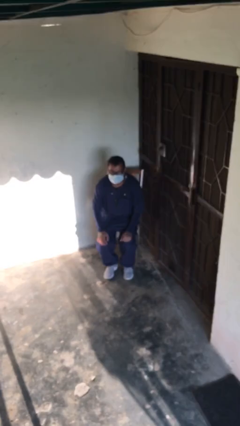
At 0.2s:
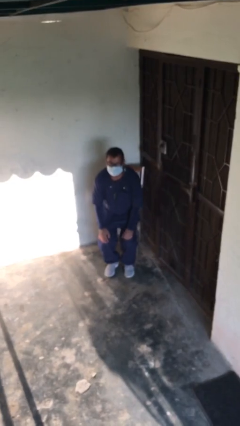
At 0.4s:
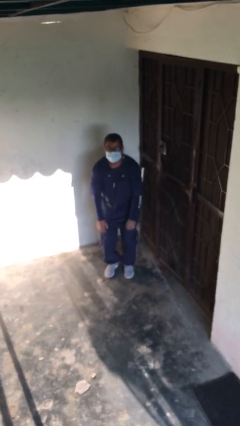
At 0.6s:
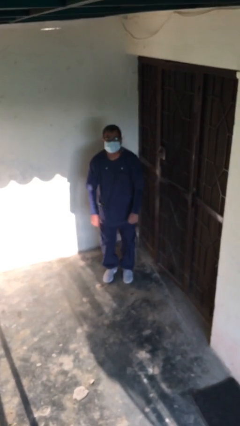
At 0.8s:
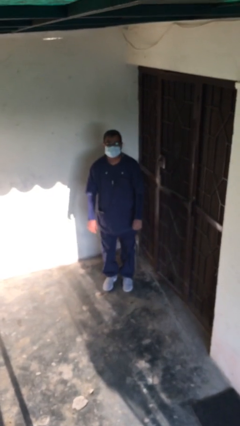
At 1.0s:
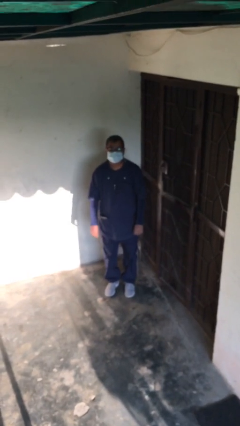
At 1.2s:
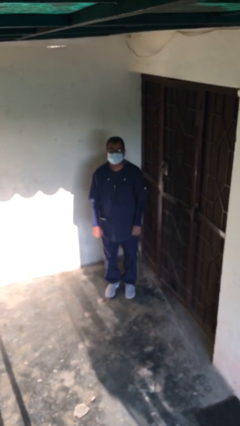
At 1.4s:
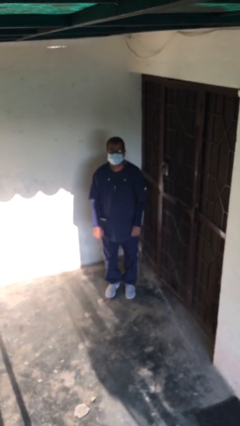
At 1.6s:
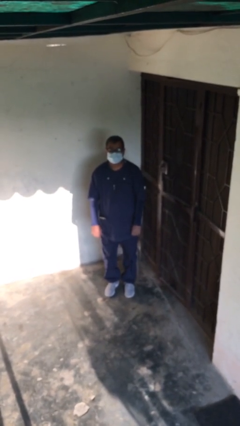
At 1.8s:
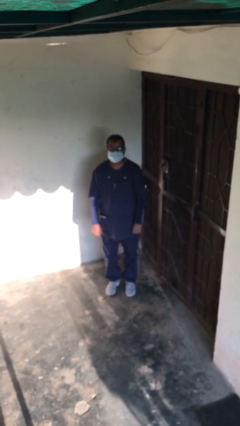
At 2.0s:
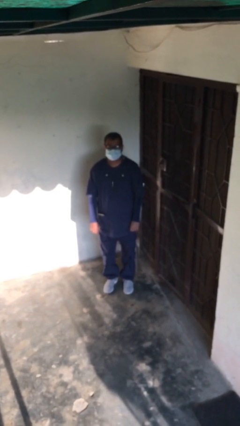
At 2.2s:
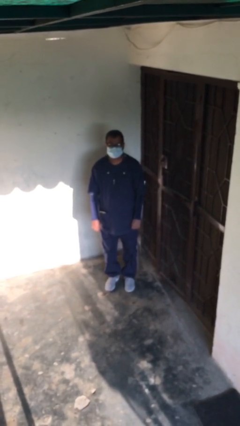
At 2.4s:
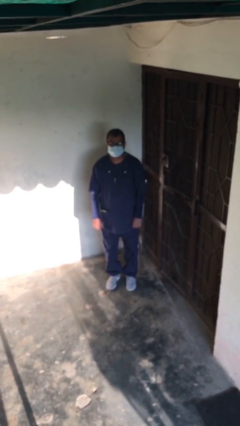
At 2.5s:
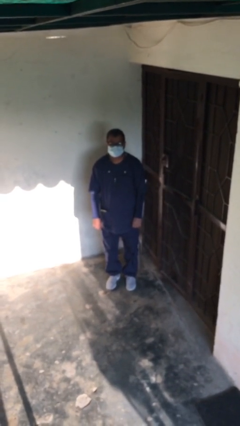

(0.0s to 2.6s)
person stands up

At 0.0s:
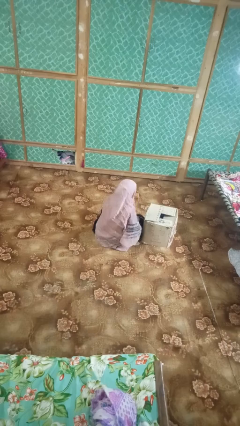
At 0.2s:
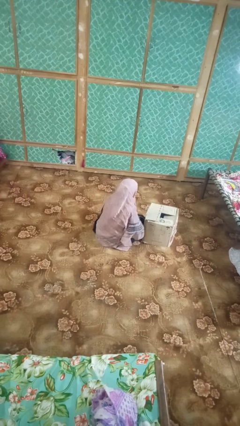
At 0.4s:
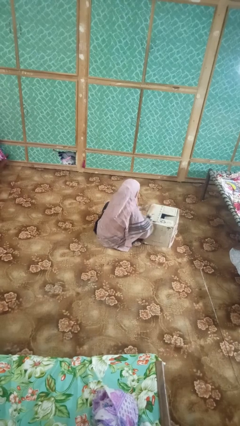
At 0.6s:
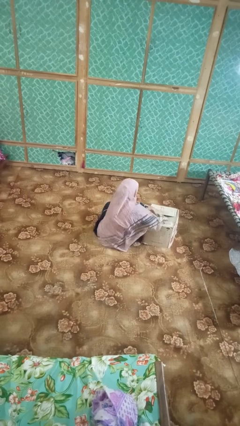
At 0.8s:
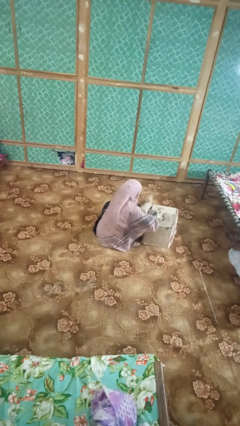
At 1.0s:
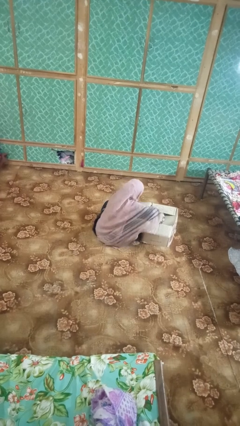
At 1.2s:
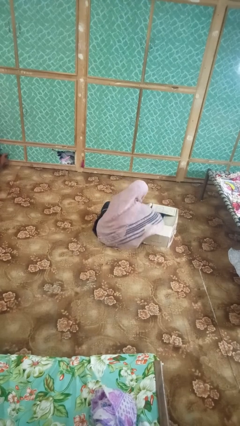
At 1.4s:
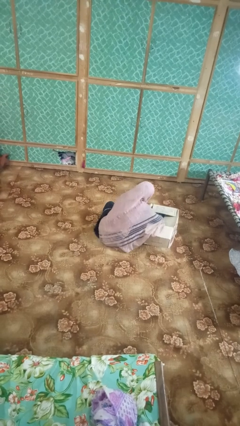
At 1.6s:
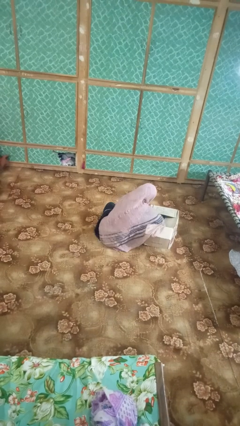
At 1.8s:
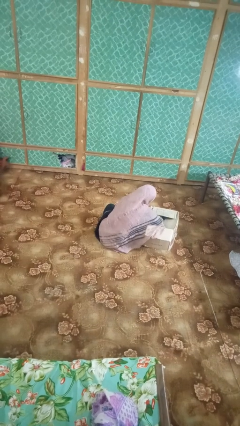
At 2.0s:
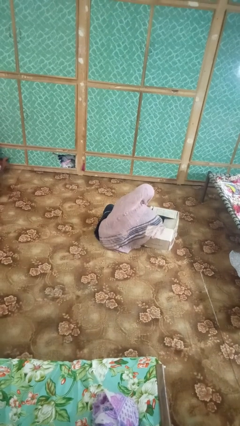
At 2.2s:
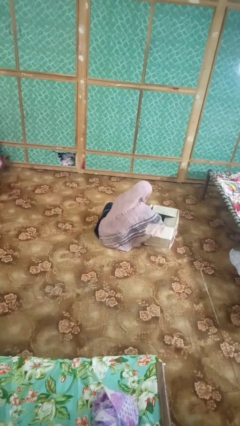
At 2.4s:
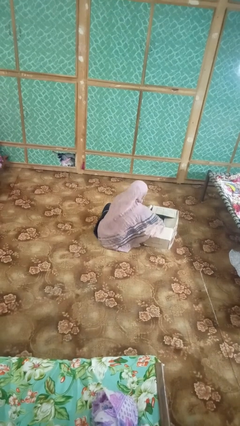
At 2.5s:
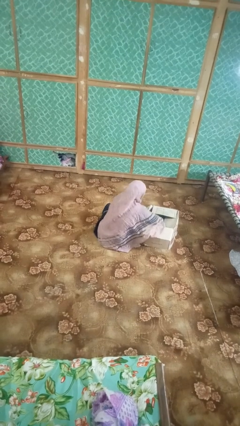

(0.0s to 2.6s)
person searches in box

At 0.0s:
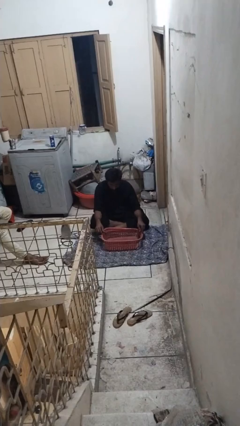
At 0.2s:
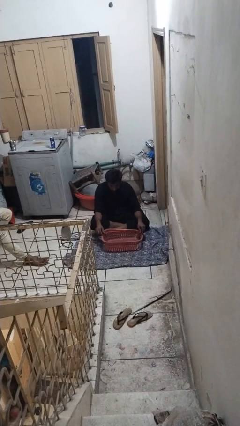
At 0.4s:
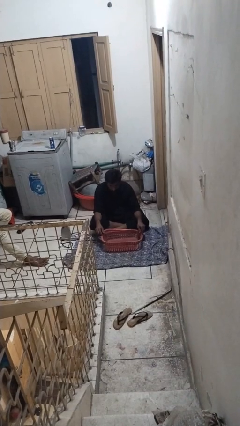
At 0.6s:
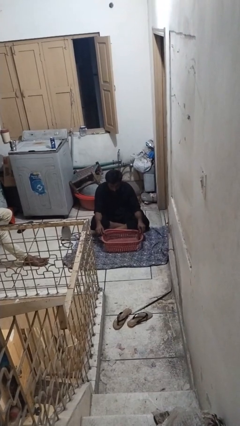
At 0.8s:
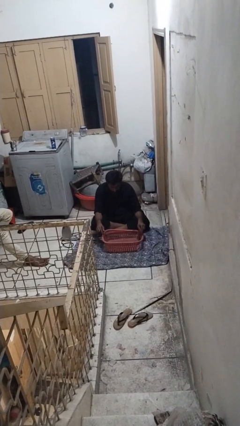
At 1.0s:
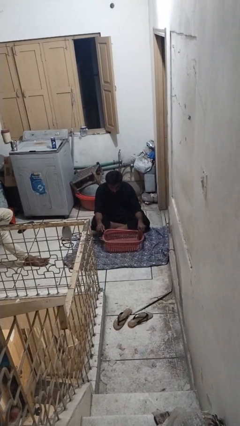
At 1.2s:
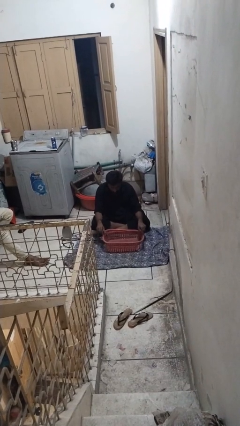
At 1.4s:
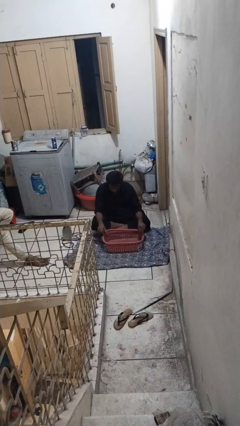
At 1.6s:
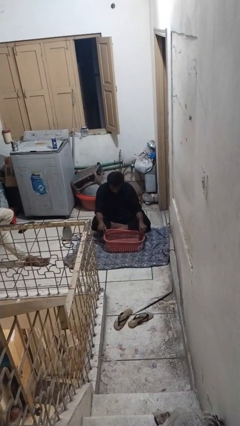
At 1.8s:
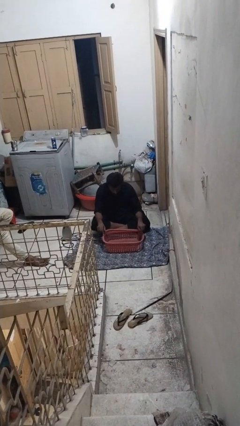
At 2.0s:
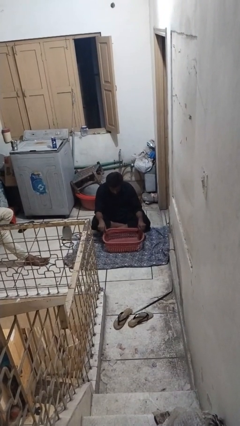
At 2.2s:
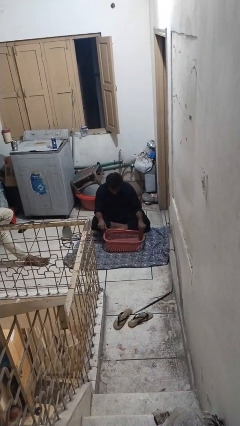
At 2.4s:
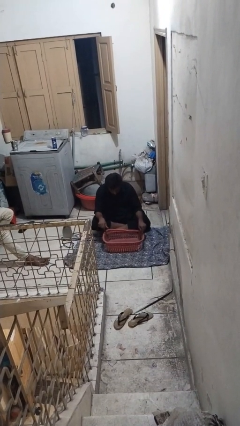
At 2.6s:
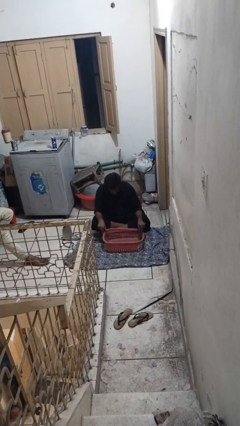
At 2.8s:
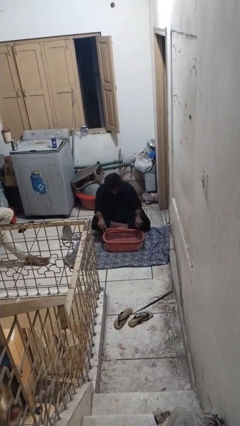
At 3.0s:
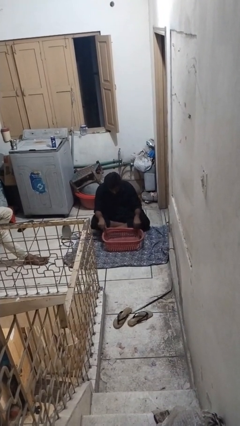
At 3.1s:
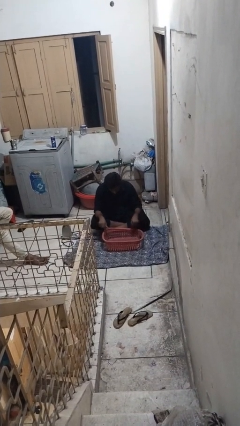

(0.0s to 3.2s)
person taps object with finger

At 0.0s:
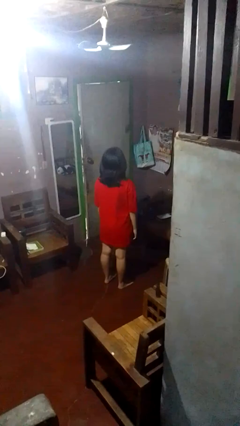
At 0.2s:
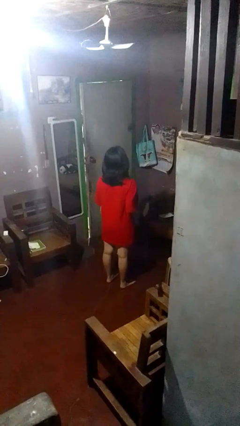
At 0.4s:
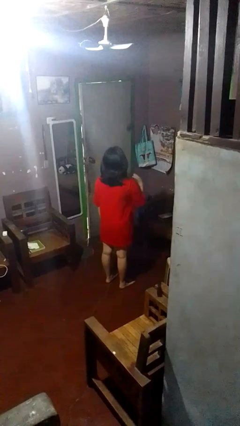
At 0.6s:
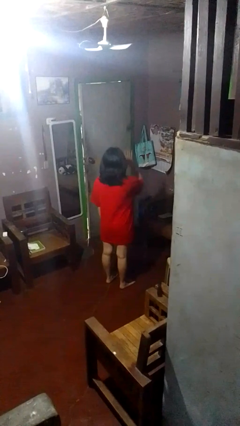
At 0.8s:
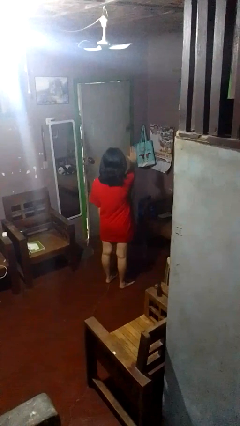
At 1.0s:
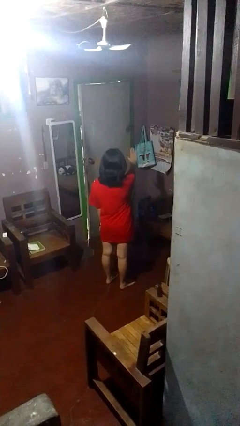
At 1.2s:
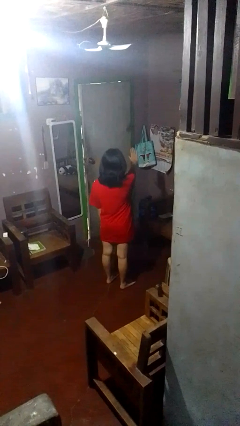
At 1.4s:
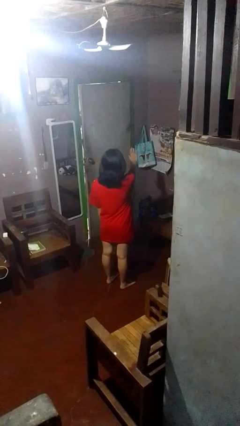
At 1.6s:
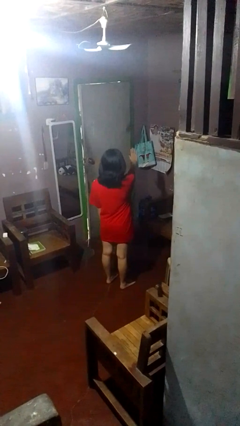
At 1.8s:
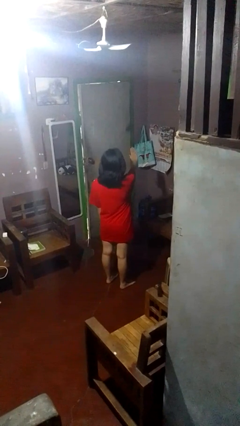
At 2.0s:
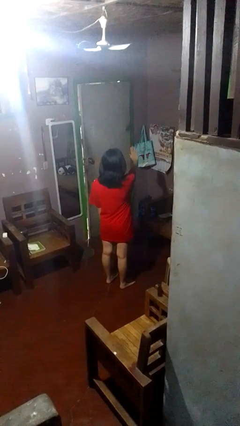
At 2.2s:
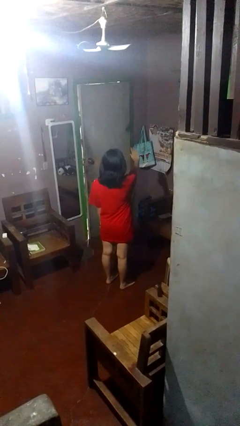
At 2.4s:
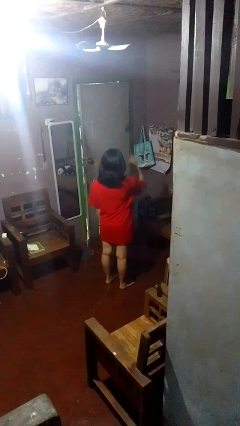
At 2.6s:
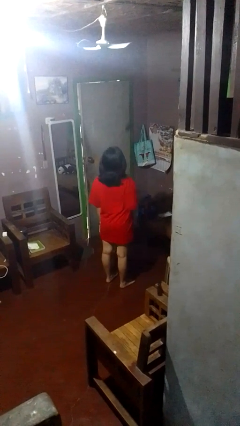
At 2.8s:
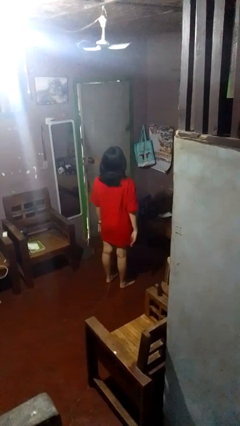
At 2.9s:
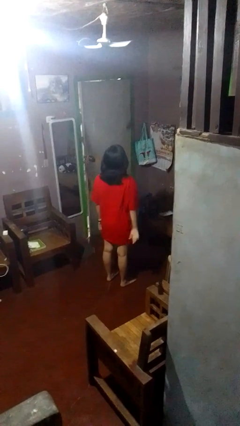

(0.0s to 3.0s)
person gestures stop

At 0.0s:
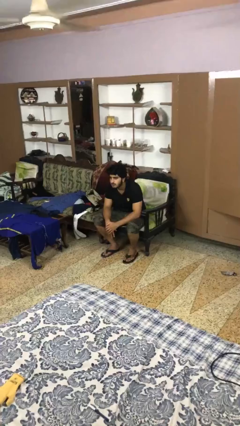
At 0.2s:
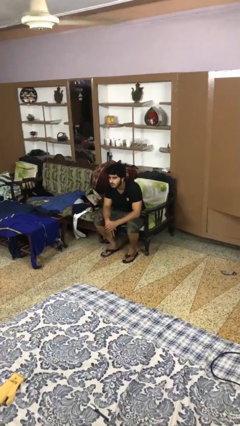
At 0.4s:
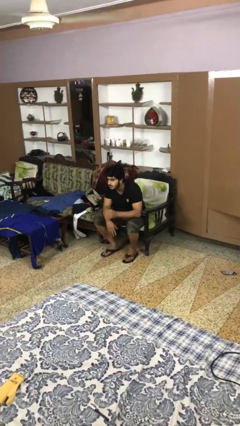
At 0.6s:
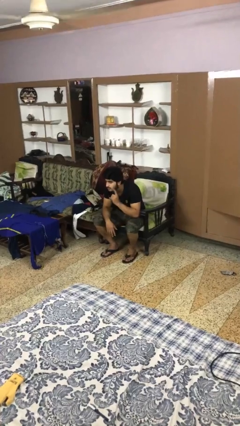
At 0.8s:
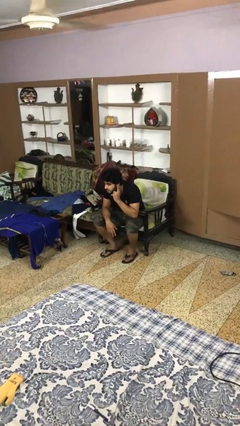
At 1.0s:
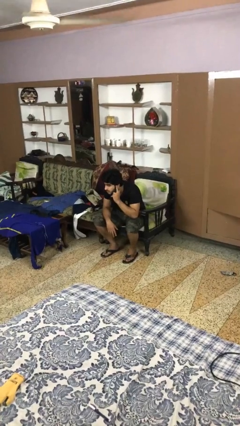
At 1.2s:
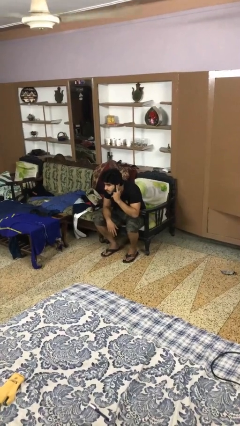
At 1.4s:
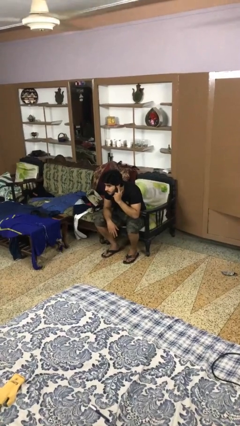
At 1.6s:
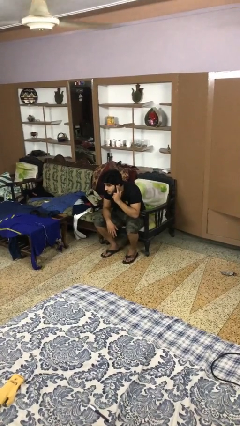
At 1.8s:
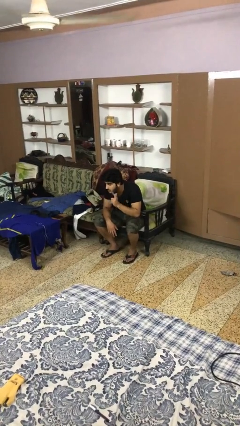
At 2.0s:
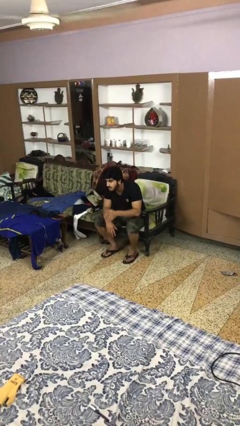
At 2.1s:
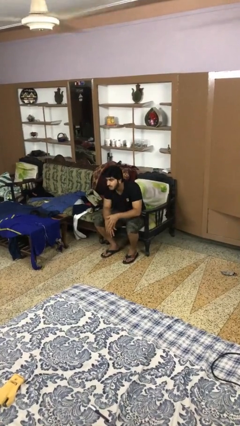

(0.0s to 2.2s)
person gestures listen closely

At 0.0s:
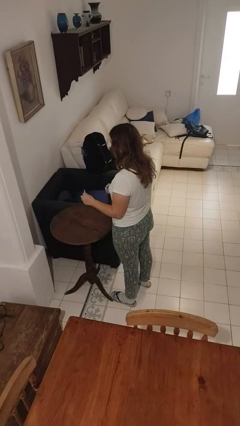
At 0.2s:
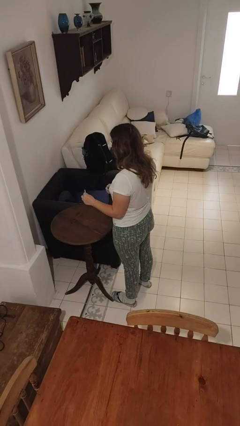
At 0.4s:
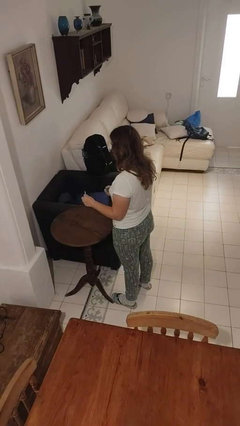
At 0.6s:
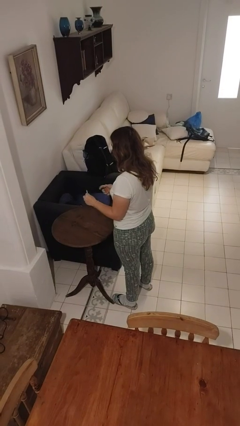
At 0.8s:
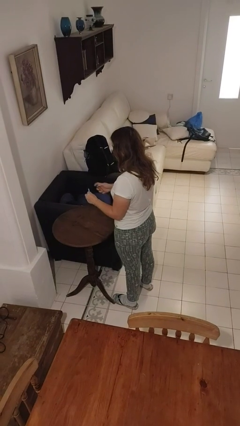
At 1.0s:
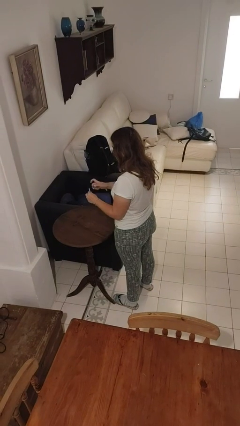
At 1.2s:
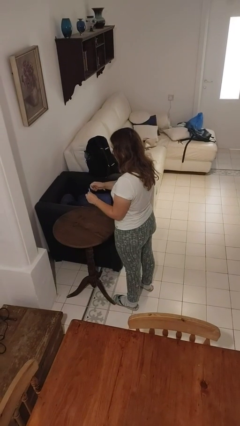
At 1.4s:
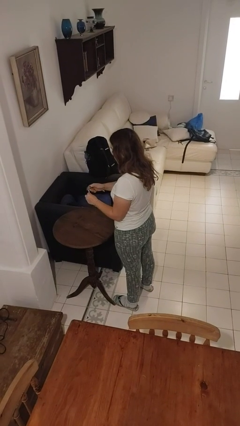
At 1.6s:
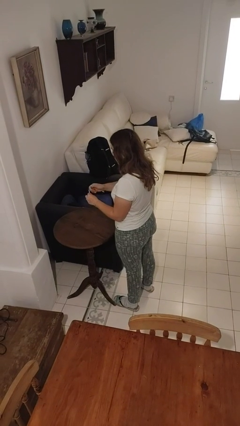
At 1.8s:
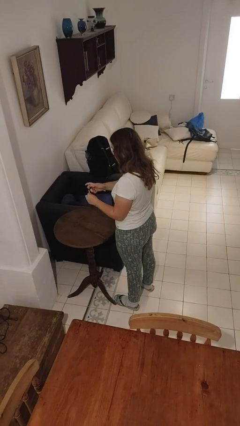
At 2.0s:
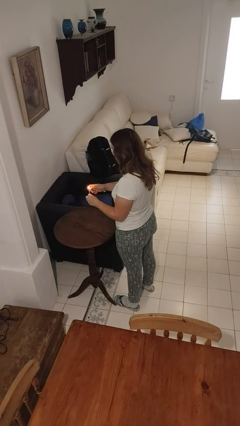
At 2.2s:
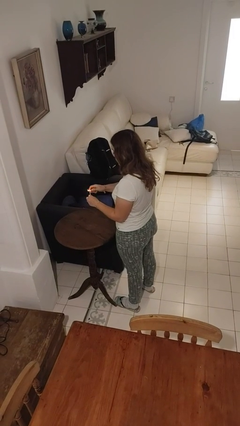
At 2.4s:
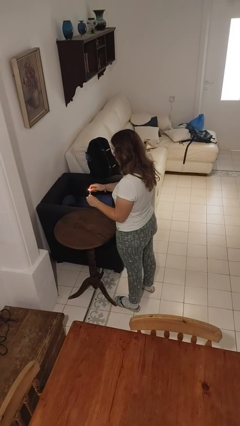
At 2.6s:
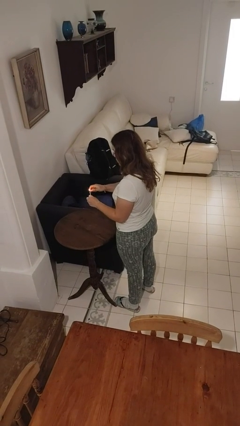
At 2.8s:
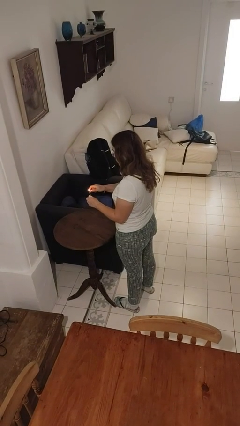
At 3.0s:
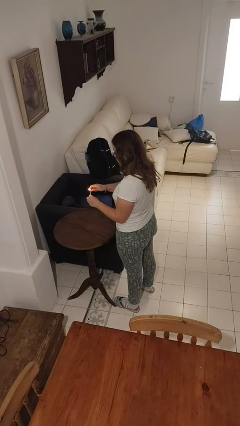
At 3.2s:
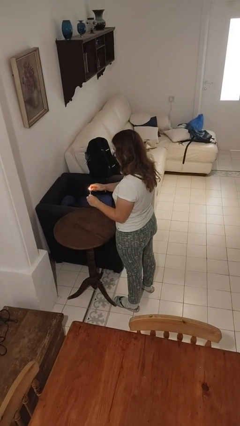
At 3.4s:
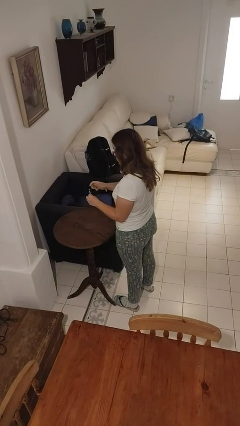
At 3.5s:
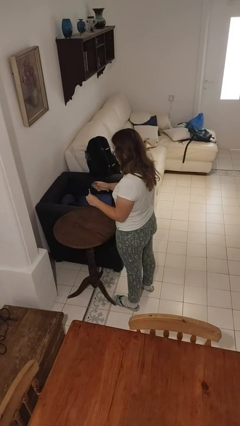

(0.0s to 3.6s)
person lights candle

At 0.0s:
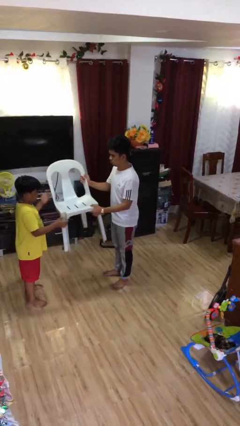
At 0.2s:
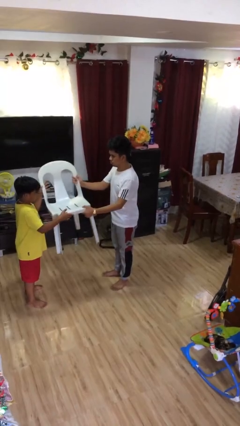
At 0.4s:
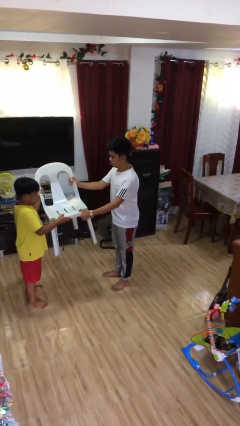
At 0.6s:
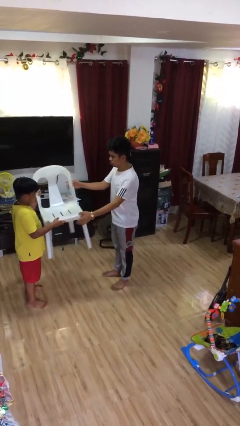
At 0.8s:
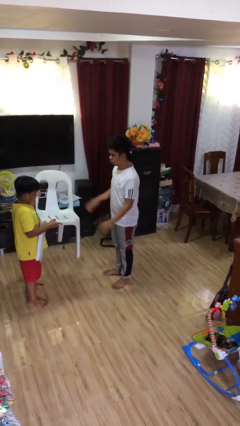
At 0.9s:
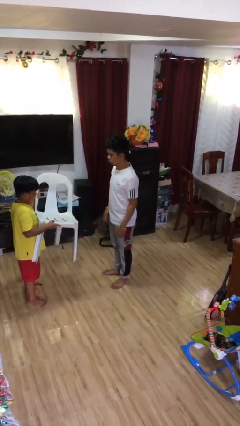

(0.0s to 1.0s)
person transfers object to person
